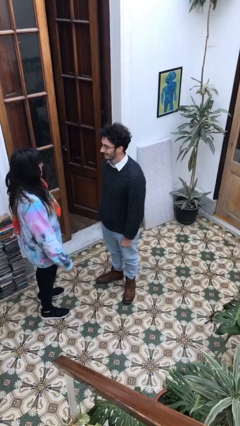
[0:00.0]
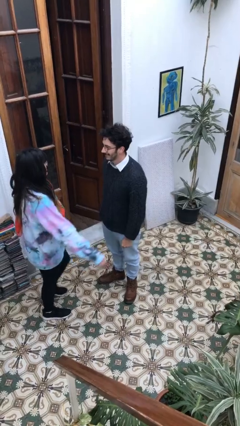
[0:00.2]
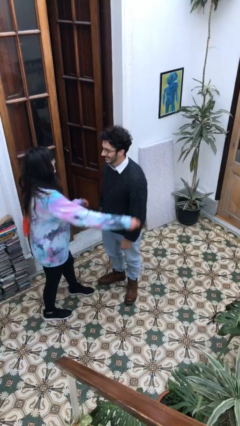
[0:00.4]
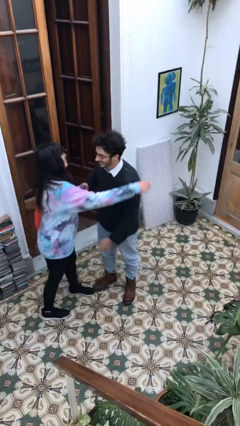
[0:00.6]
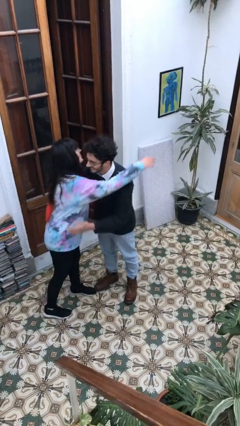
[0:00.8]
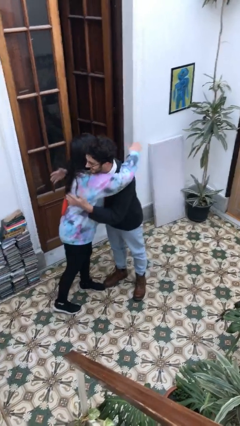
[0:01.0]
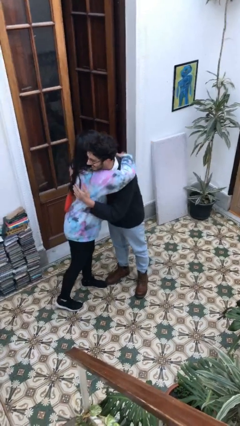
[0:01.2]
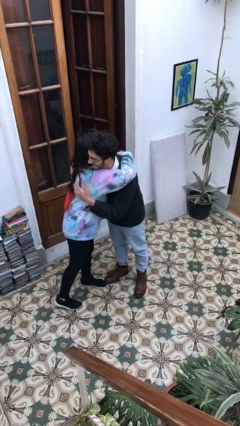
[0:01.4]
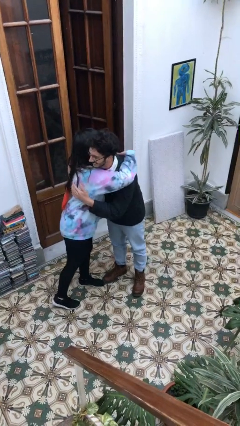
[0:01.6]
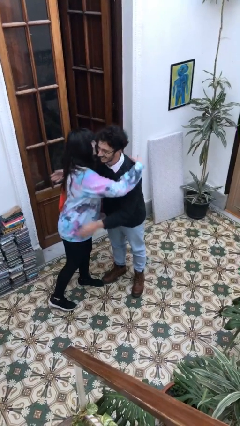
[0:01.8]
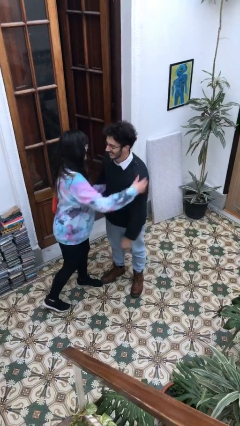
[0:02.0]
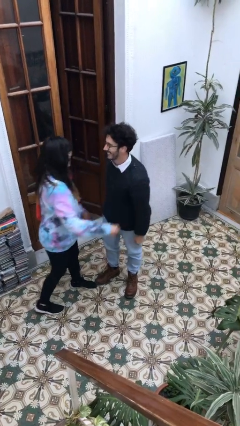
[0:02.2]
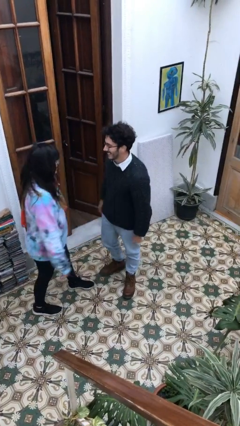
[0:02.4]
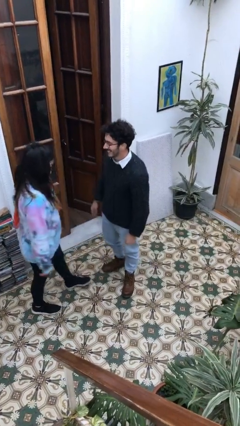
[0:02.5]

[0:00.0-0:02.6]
person embraces person

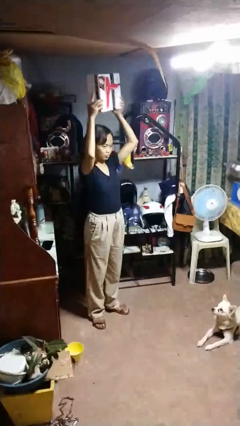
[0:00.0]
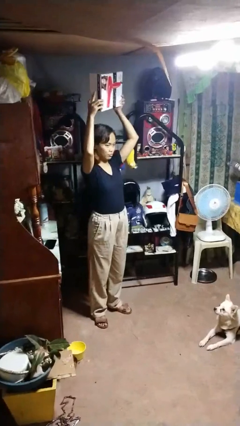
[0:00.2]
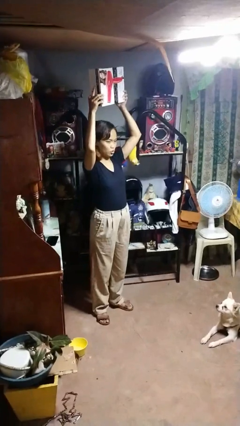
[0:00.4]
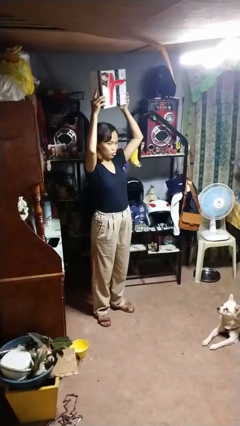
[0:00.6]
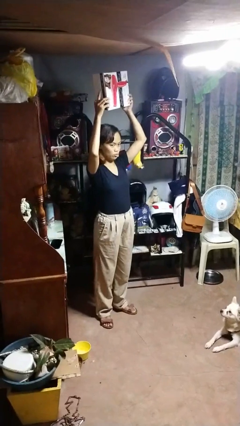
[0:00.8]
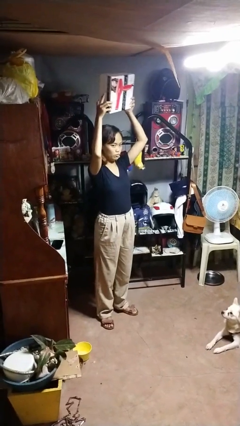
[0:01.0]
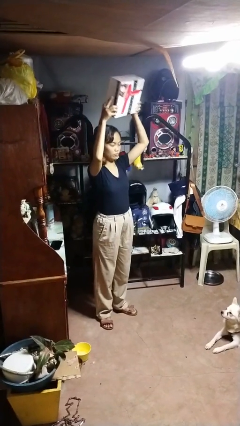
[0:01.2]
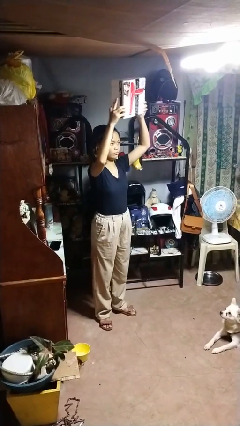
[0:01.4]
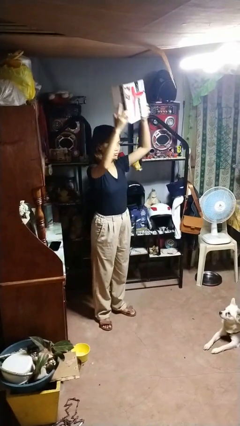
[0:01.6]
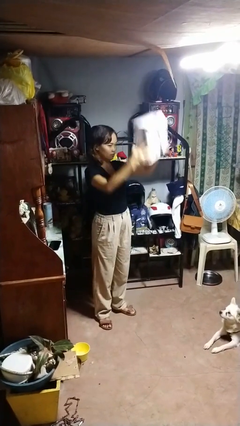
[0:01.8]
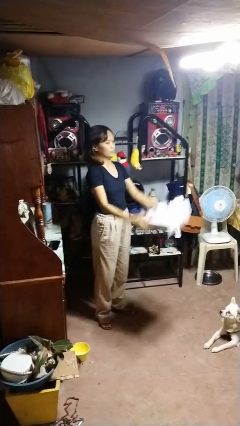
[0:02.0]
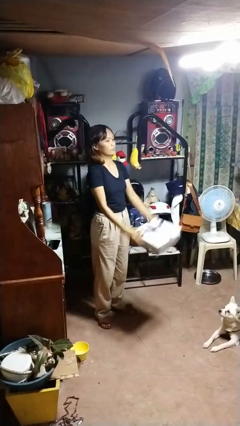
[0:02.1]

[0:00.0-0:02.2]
person holds object above head

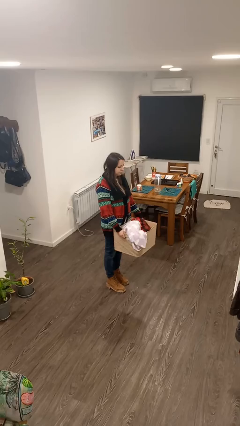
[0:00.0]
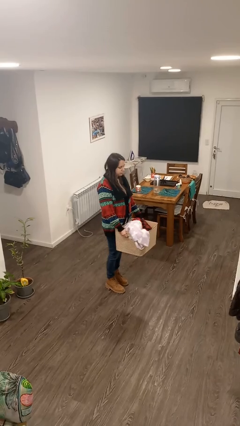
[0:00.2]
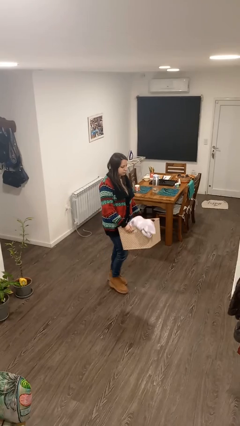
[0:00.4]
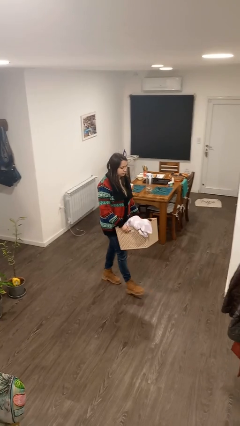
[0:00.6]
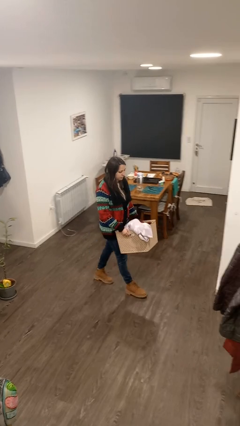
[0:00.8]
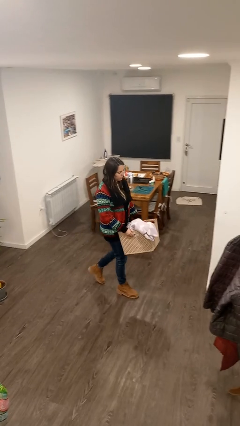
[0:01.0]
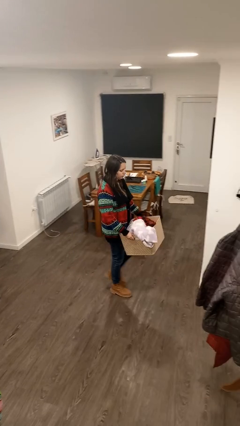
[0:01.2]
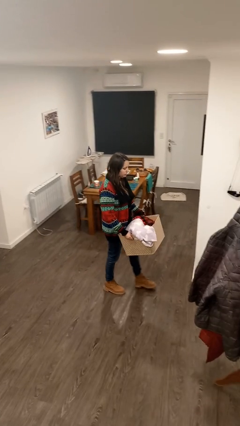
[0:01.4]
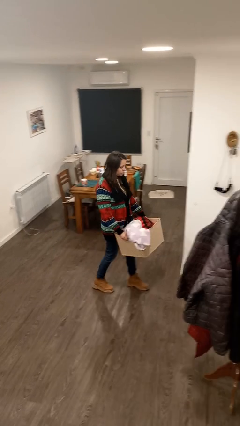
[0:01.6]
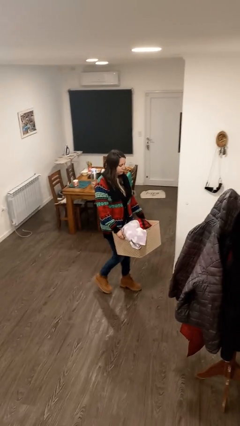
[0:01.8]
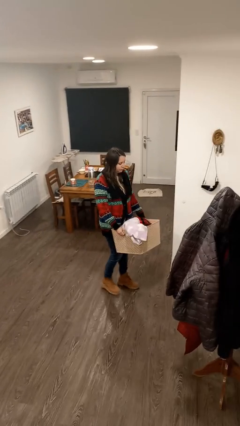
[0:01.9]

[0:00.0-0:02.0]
person carries laundry basket

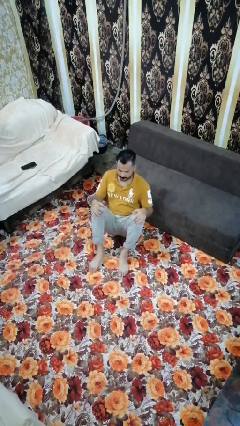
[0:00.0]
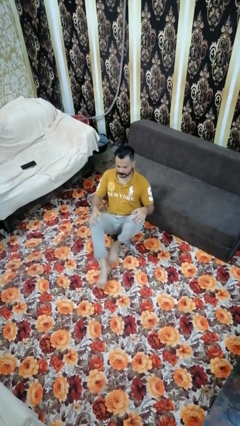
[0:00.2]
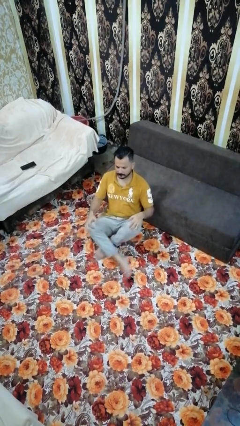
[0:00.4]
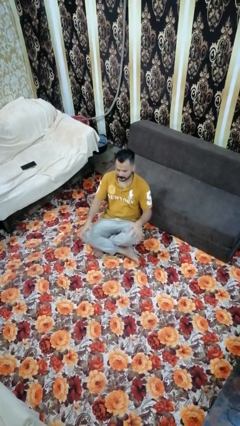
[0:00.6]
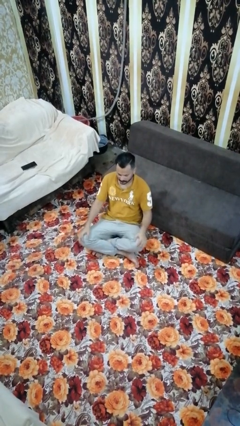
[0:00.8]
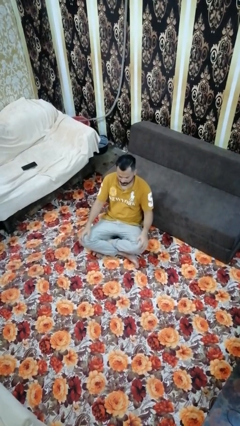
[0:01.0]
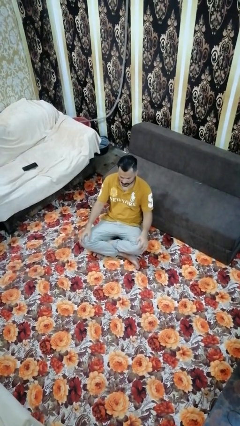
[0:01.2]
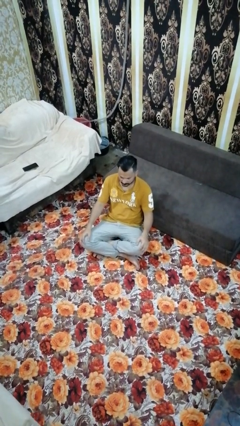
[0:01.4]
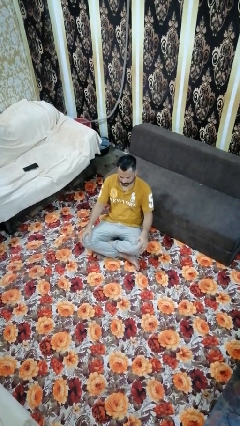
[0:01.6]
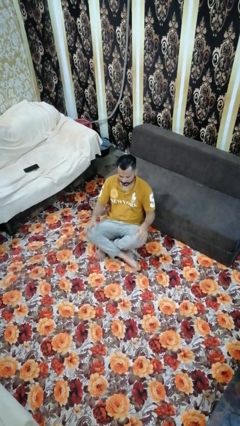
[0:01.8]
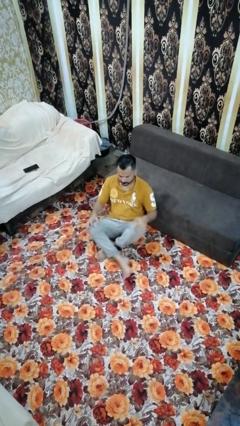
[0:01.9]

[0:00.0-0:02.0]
person crosses legs

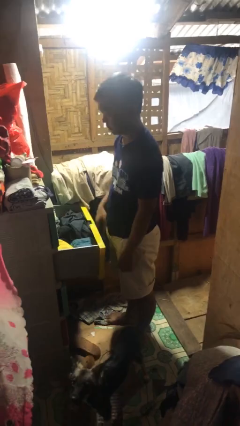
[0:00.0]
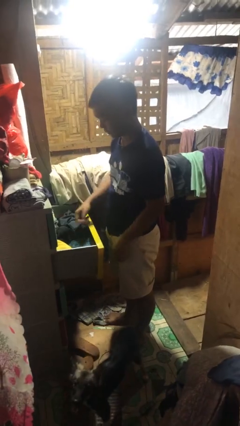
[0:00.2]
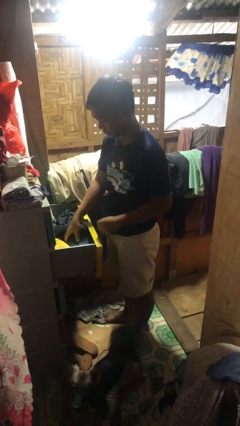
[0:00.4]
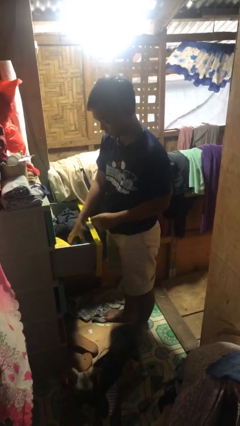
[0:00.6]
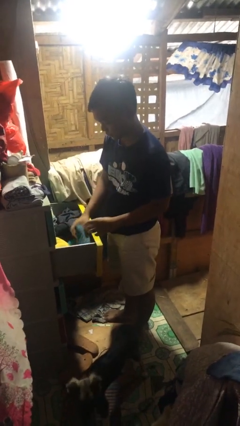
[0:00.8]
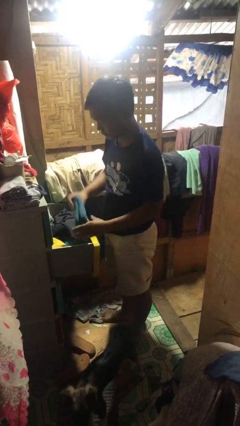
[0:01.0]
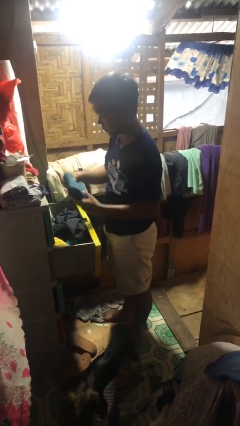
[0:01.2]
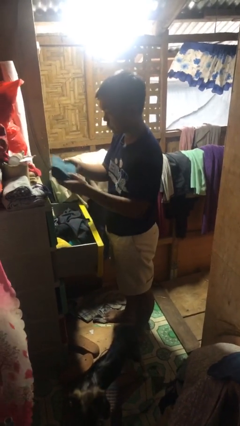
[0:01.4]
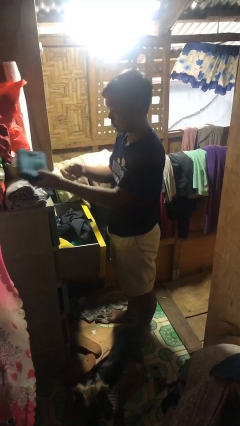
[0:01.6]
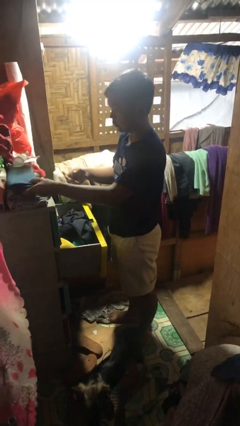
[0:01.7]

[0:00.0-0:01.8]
person takes clothes from dresser

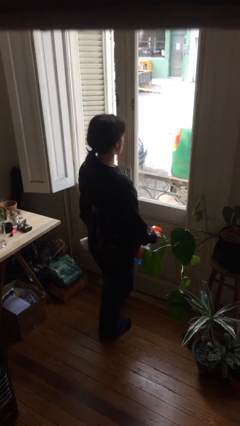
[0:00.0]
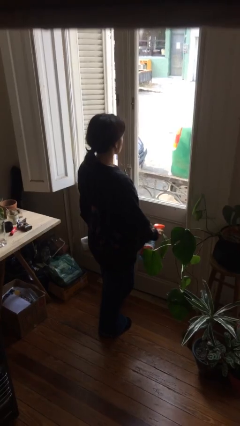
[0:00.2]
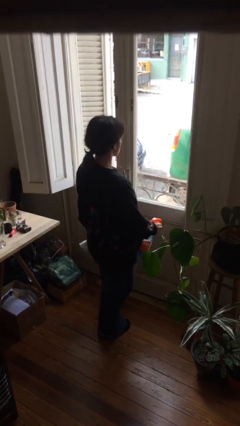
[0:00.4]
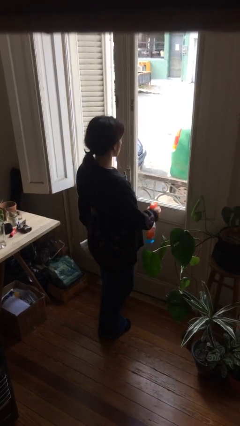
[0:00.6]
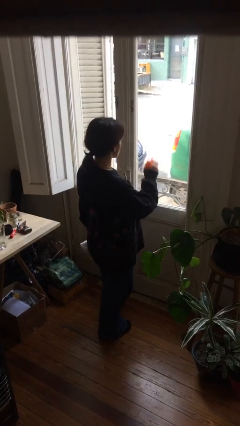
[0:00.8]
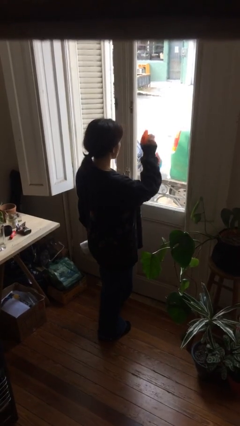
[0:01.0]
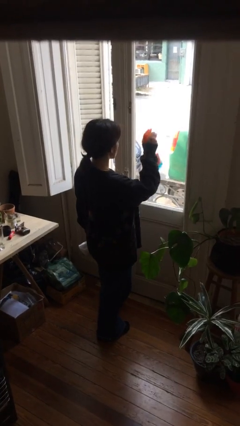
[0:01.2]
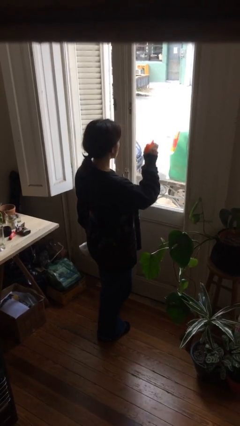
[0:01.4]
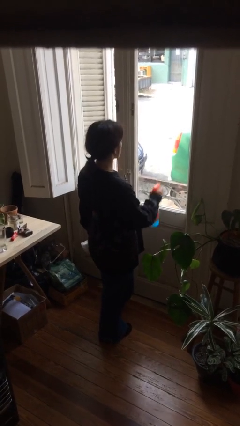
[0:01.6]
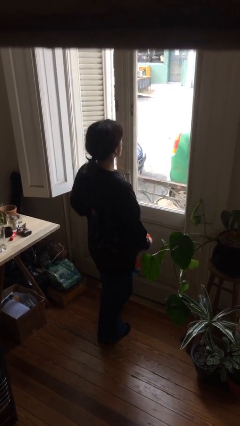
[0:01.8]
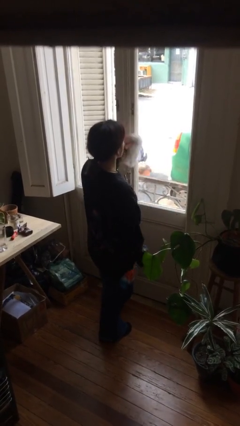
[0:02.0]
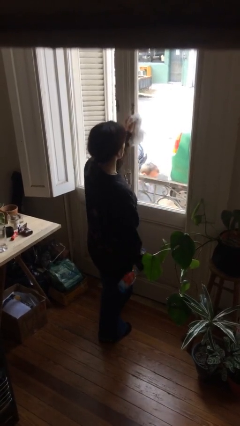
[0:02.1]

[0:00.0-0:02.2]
person sprays from bottle

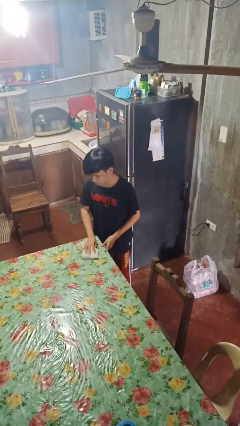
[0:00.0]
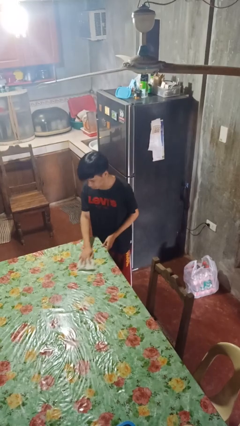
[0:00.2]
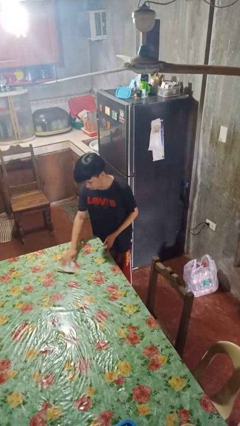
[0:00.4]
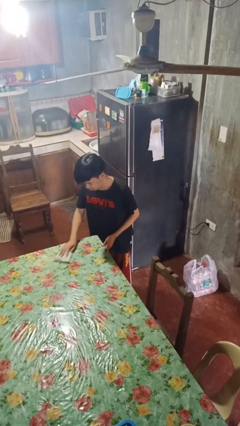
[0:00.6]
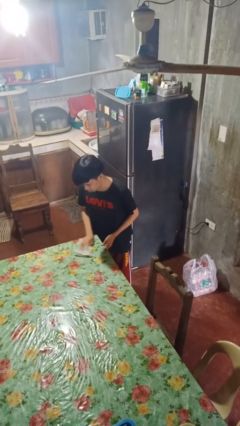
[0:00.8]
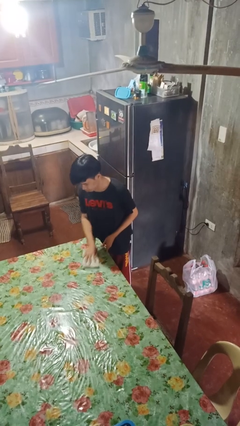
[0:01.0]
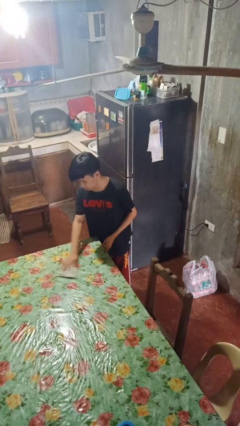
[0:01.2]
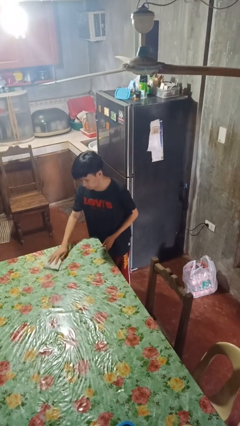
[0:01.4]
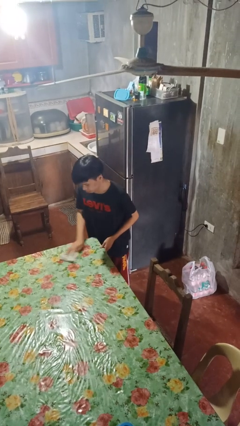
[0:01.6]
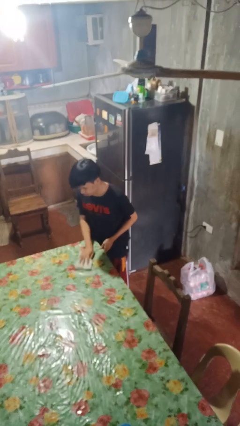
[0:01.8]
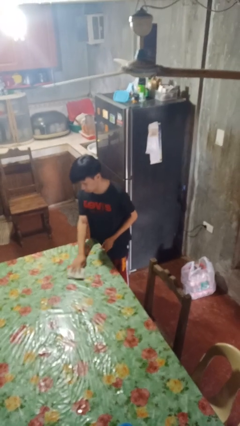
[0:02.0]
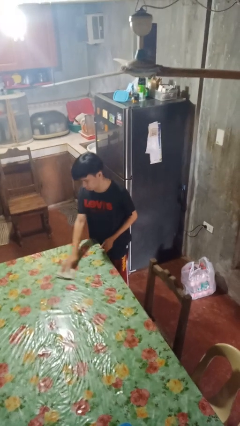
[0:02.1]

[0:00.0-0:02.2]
person cleans table with rag

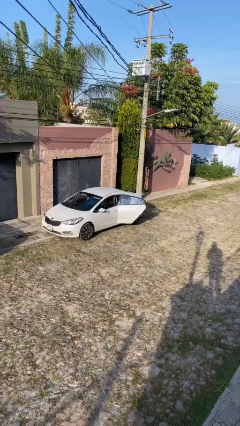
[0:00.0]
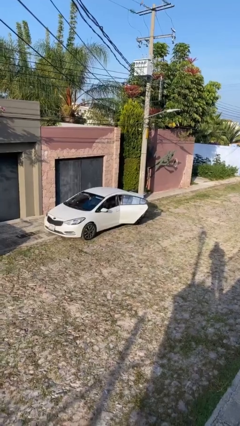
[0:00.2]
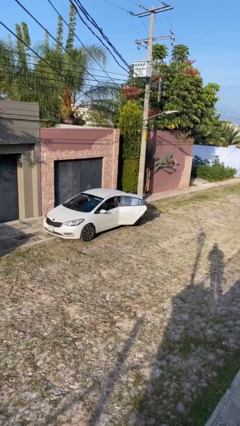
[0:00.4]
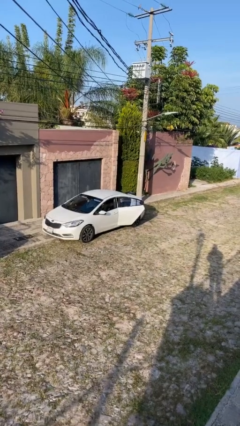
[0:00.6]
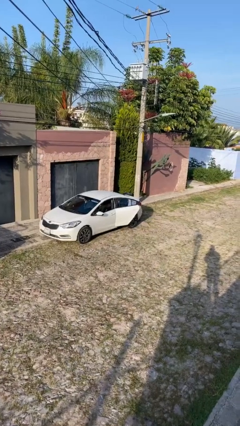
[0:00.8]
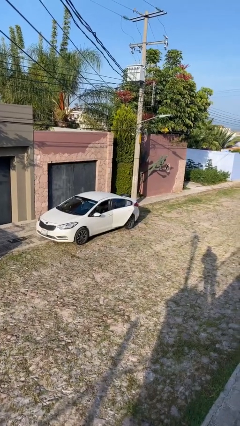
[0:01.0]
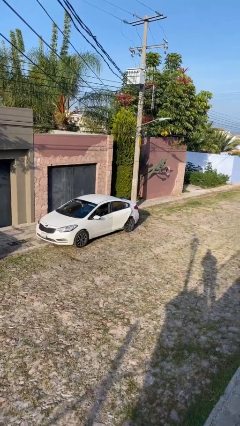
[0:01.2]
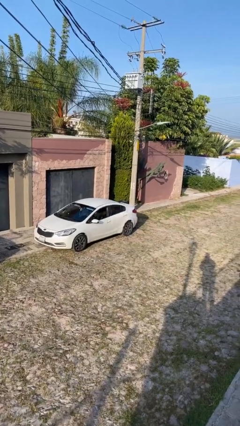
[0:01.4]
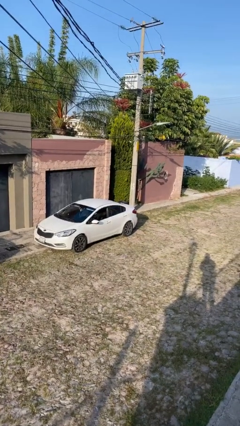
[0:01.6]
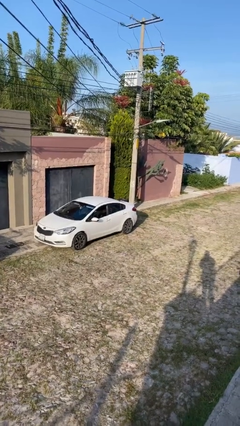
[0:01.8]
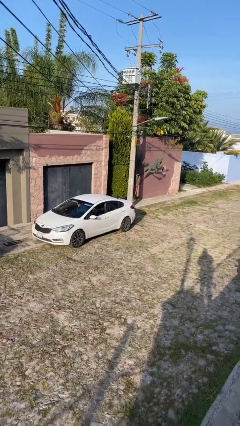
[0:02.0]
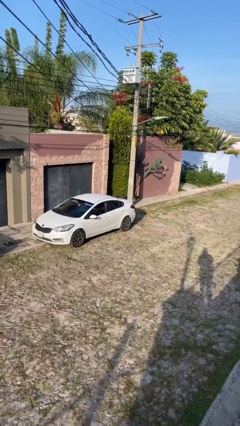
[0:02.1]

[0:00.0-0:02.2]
person closes car door
